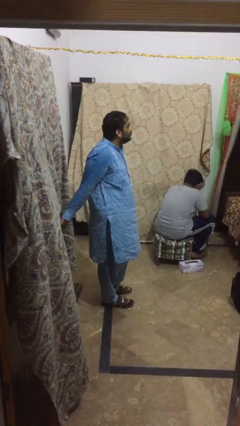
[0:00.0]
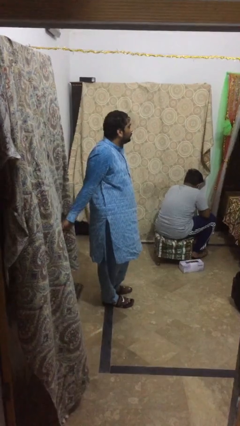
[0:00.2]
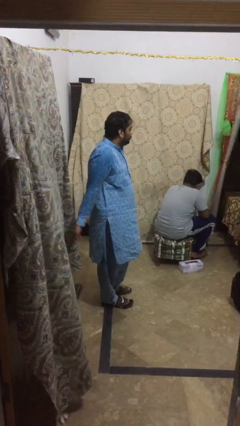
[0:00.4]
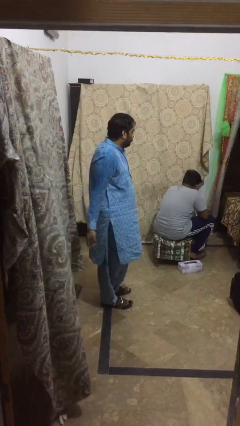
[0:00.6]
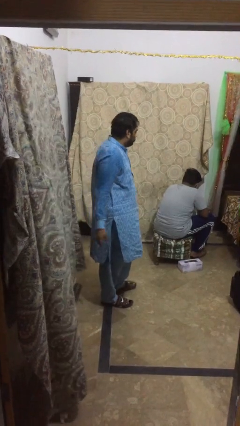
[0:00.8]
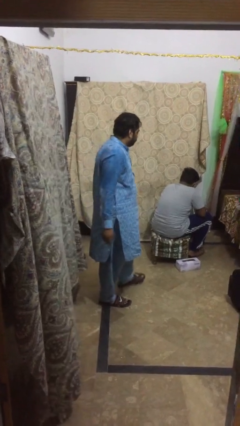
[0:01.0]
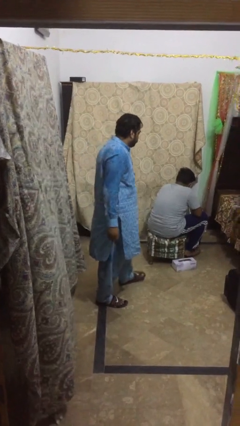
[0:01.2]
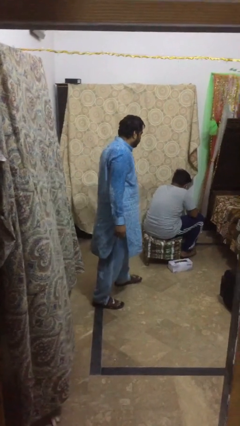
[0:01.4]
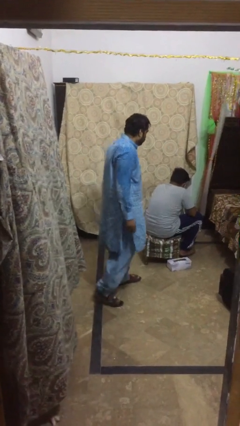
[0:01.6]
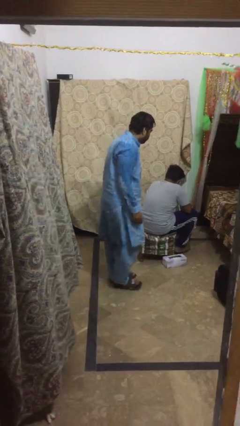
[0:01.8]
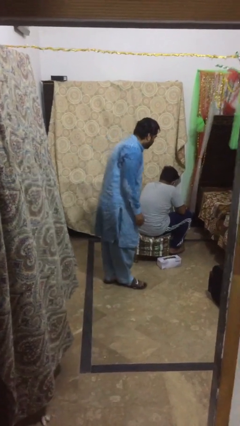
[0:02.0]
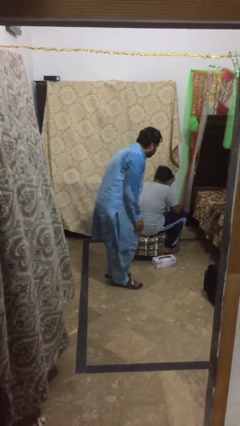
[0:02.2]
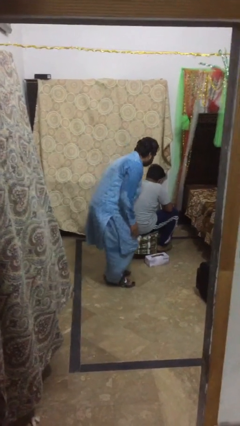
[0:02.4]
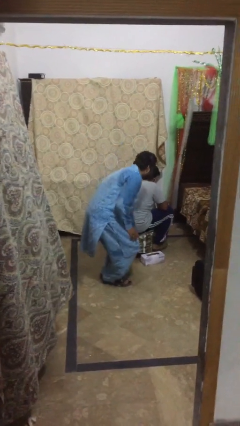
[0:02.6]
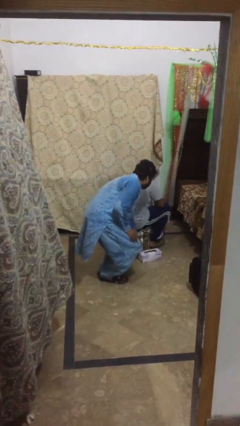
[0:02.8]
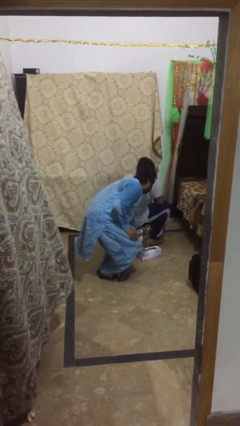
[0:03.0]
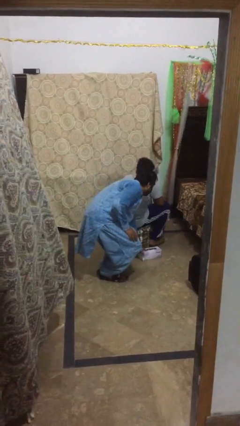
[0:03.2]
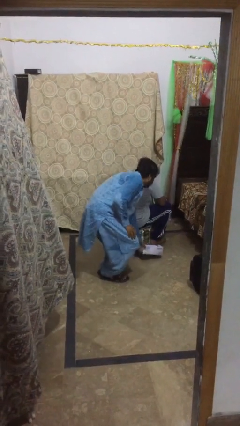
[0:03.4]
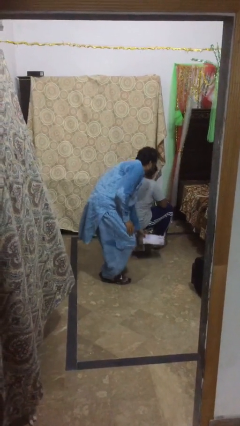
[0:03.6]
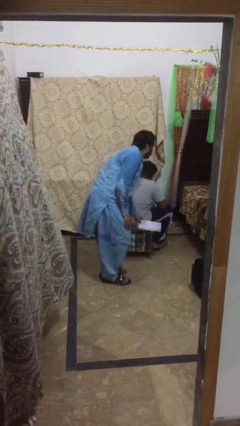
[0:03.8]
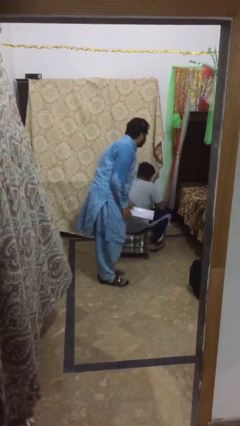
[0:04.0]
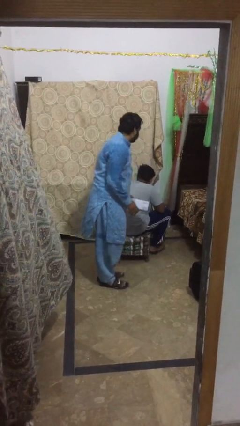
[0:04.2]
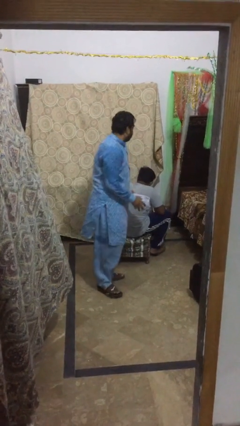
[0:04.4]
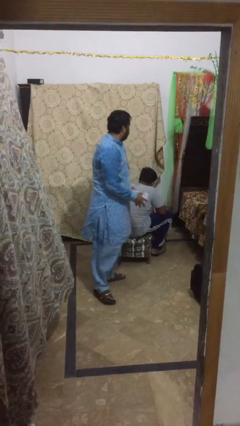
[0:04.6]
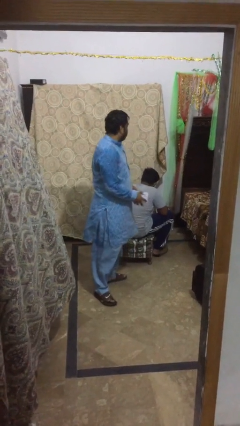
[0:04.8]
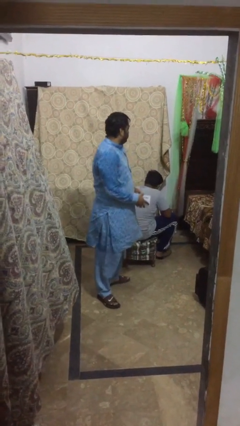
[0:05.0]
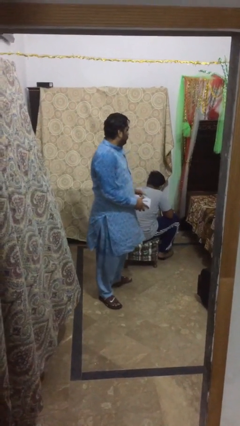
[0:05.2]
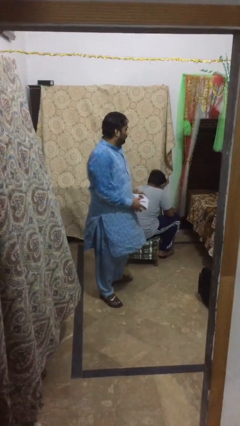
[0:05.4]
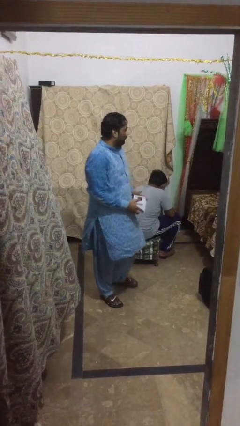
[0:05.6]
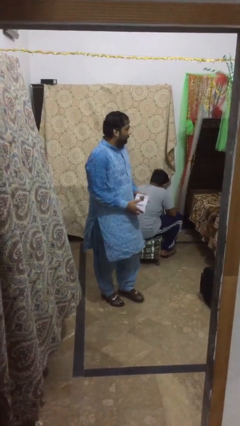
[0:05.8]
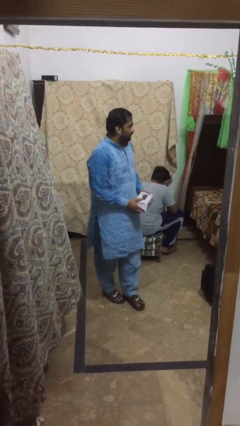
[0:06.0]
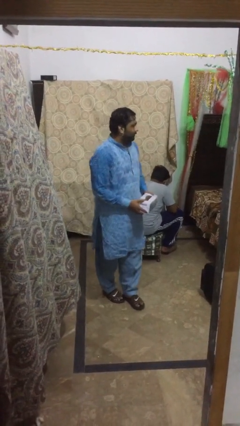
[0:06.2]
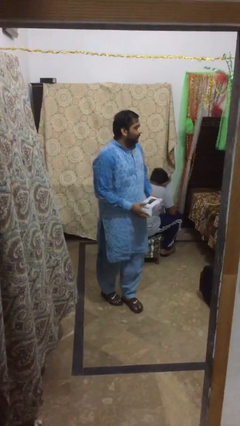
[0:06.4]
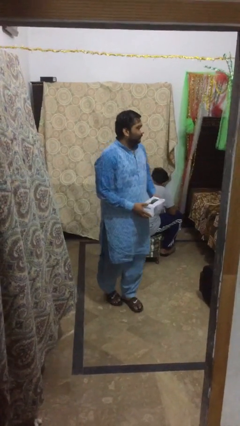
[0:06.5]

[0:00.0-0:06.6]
person steals object from person

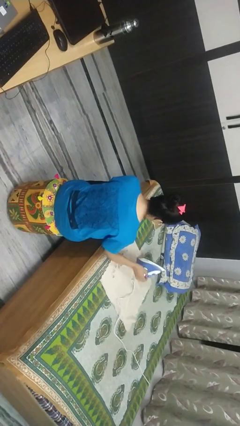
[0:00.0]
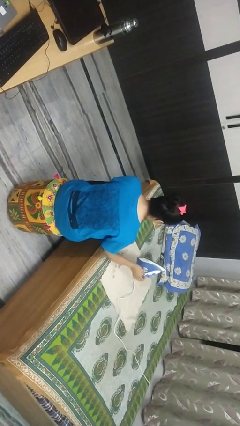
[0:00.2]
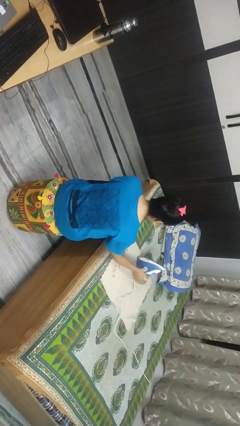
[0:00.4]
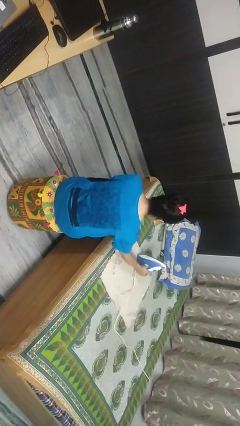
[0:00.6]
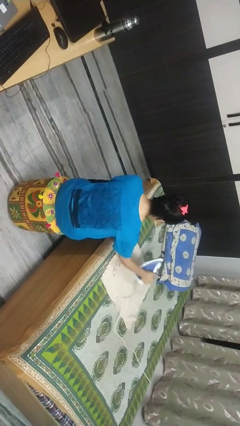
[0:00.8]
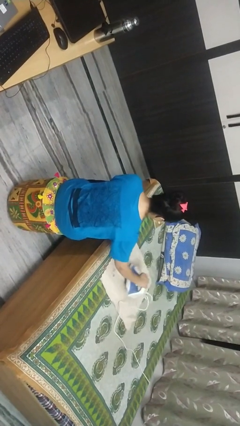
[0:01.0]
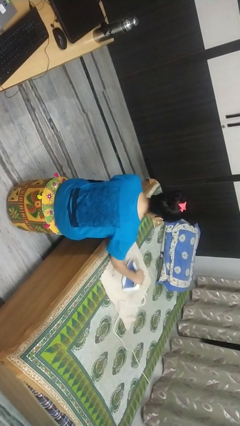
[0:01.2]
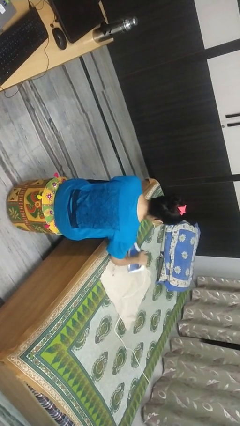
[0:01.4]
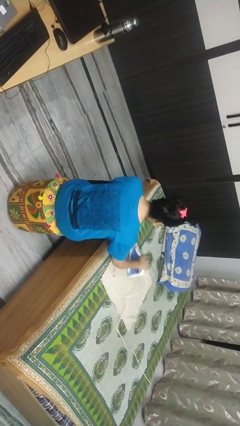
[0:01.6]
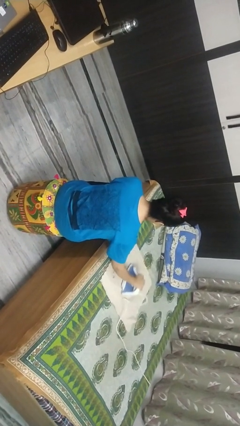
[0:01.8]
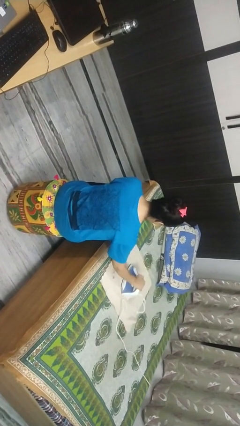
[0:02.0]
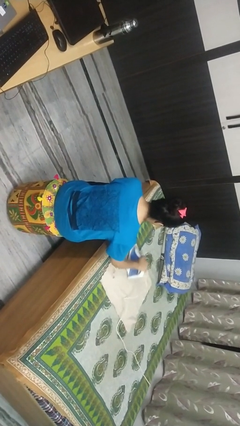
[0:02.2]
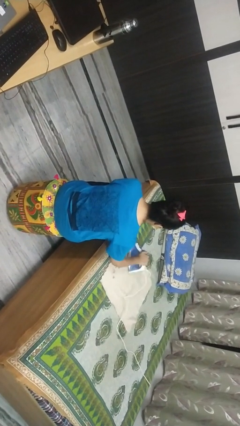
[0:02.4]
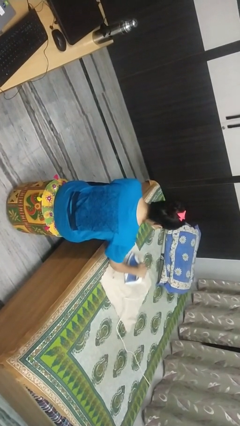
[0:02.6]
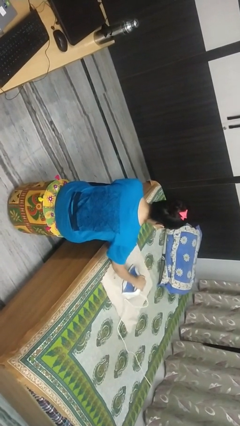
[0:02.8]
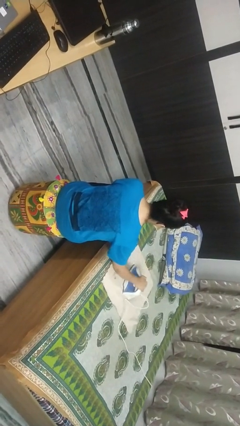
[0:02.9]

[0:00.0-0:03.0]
person irons clothes

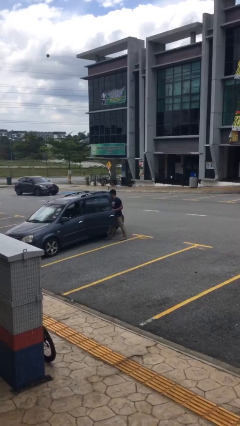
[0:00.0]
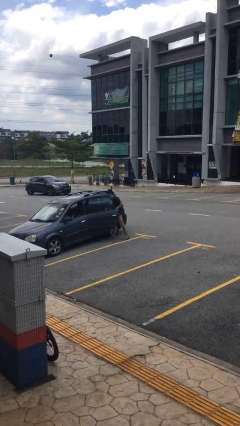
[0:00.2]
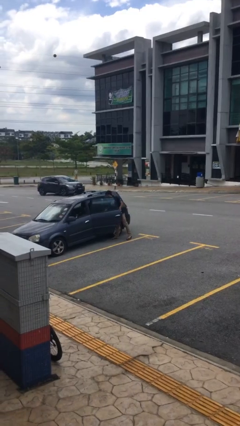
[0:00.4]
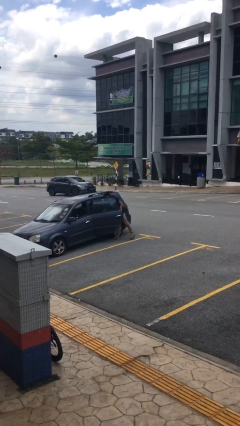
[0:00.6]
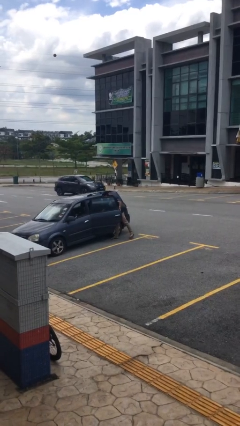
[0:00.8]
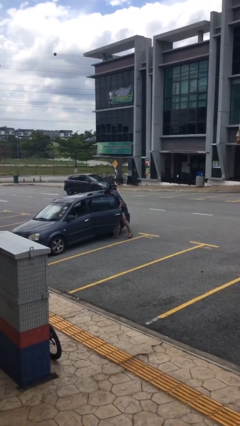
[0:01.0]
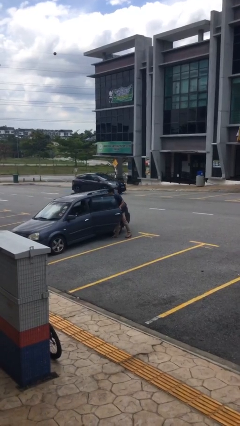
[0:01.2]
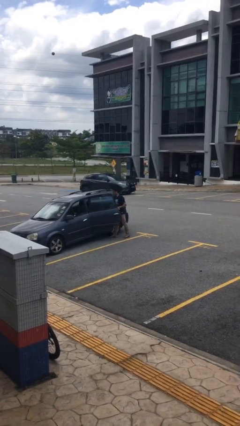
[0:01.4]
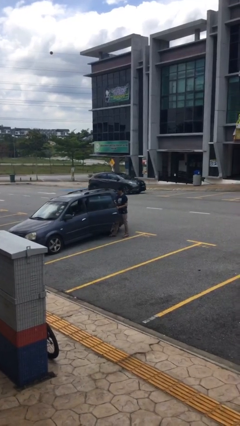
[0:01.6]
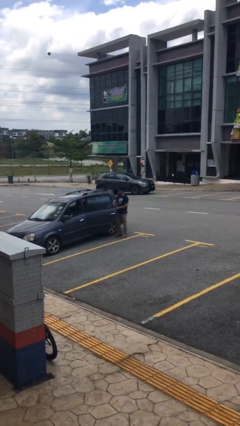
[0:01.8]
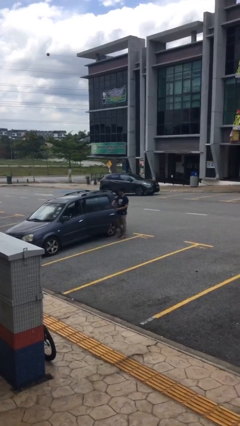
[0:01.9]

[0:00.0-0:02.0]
person loads car

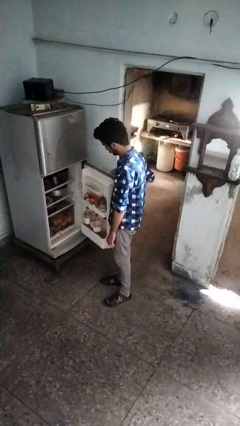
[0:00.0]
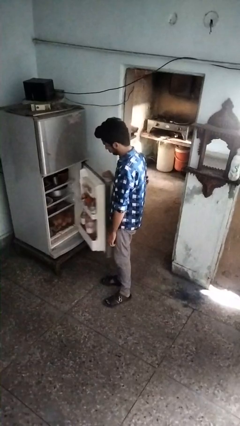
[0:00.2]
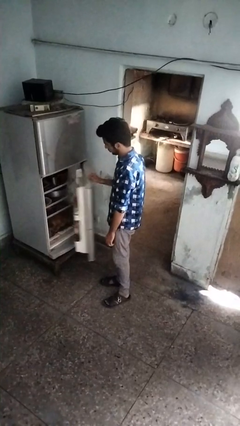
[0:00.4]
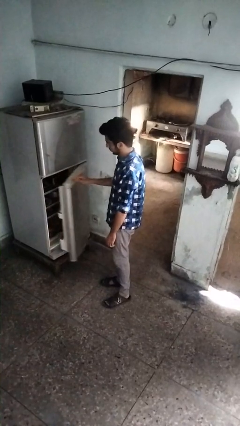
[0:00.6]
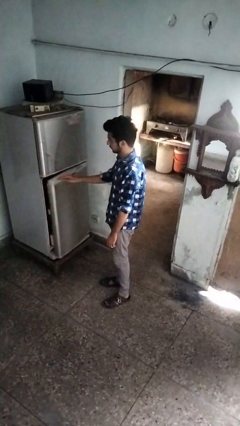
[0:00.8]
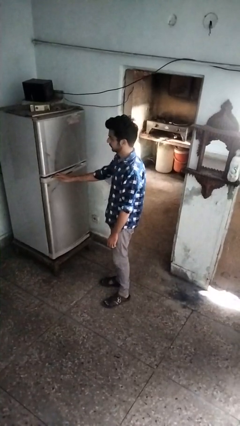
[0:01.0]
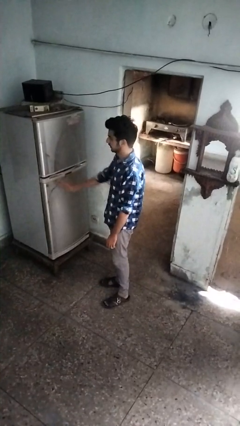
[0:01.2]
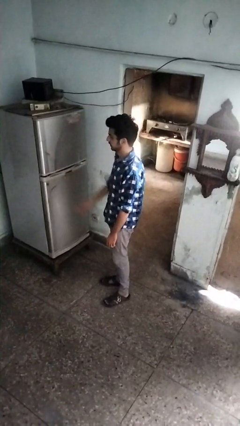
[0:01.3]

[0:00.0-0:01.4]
person closes refrigerator

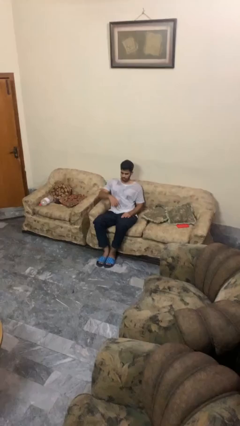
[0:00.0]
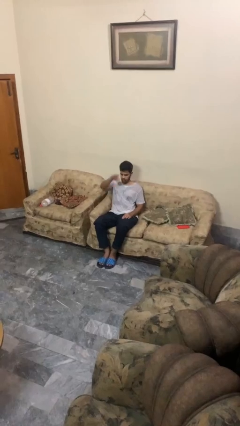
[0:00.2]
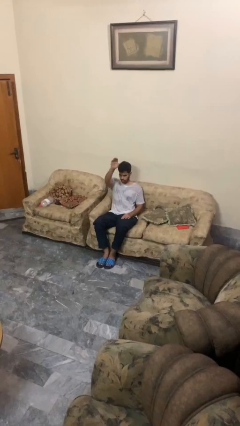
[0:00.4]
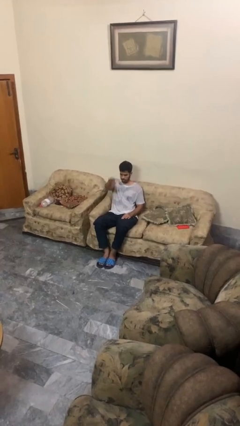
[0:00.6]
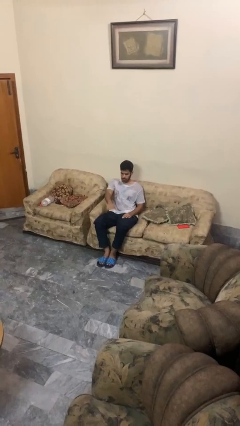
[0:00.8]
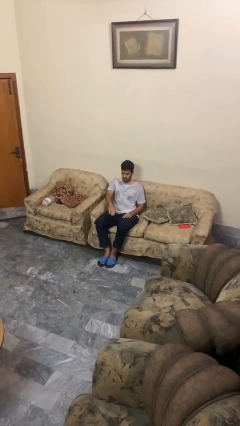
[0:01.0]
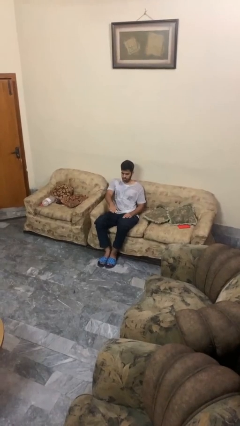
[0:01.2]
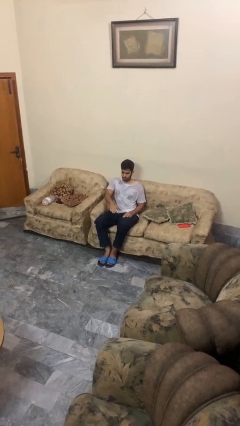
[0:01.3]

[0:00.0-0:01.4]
person gestures swipe down

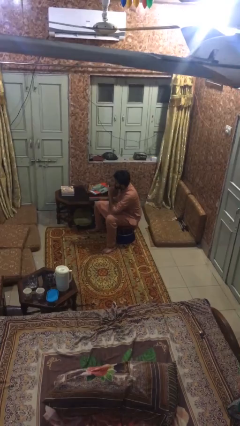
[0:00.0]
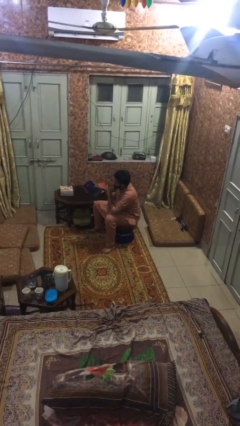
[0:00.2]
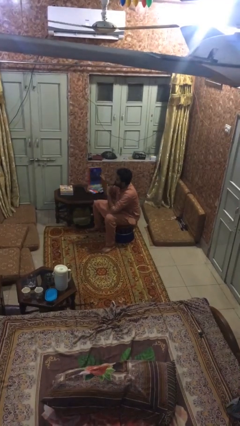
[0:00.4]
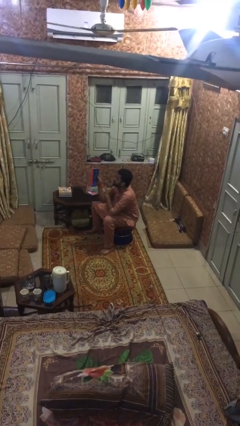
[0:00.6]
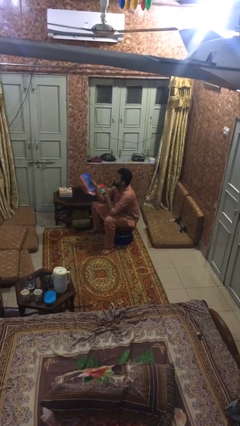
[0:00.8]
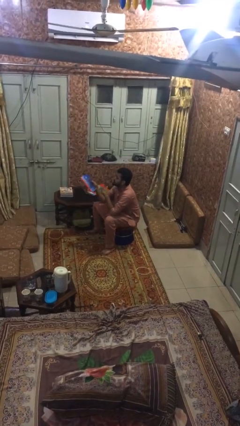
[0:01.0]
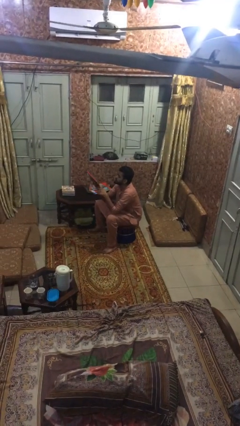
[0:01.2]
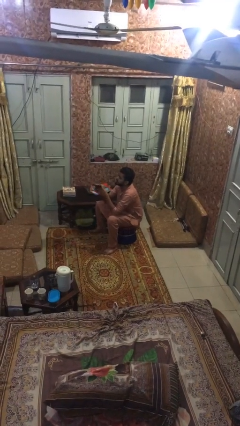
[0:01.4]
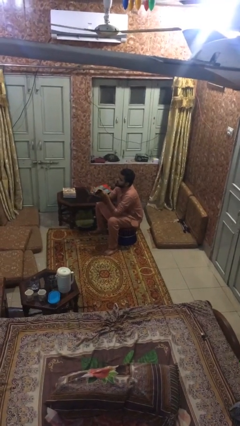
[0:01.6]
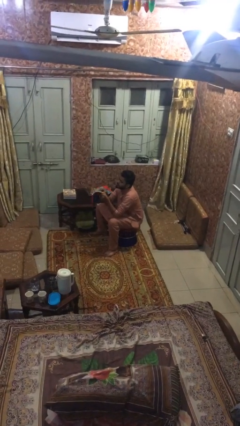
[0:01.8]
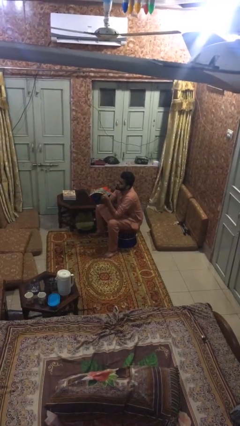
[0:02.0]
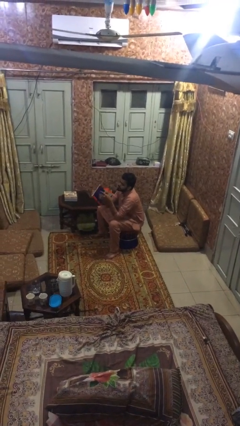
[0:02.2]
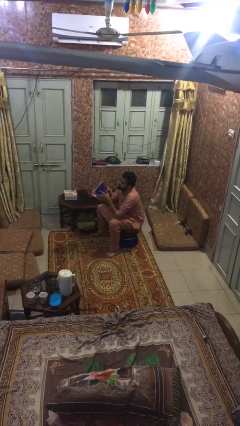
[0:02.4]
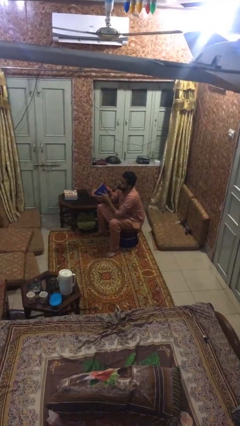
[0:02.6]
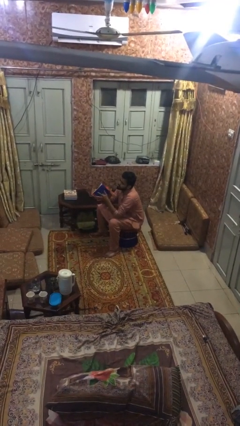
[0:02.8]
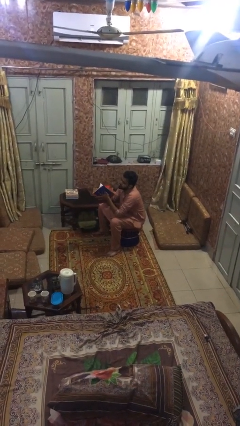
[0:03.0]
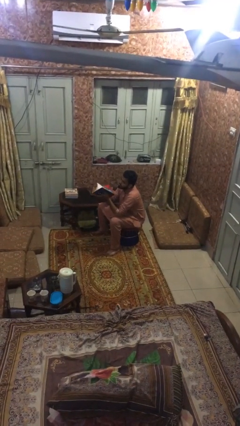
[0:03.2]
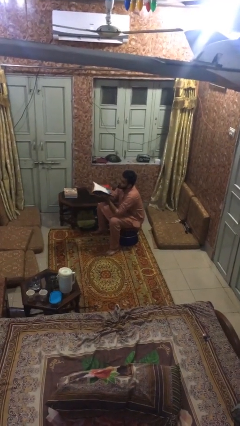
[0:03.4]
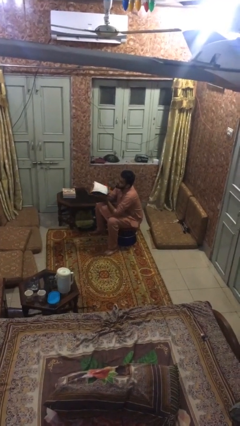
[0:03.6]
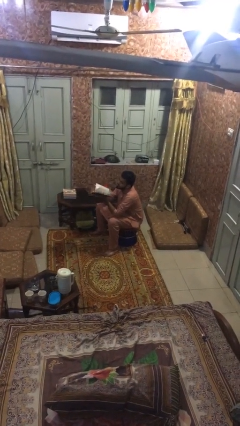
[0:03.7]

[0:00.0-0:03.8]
person picks up object from table
